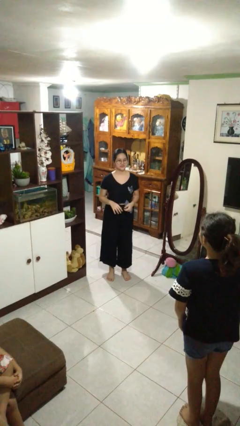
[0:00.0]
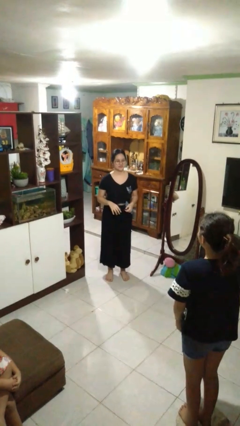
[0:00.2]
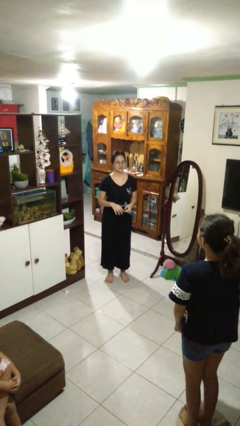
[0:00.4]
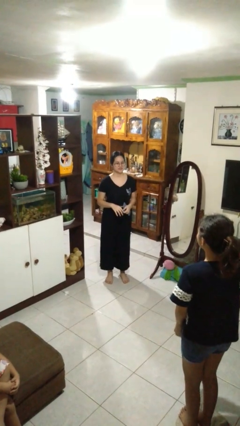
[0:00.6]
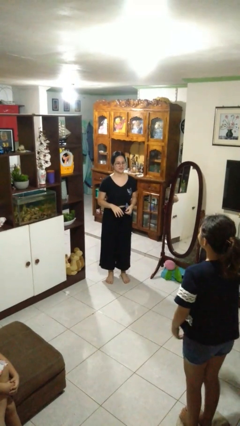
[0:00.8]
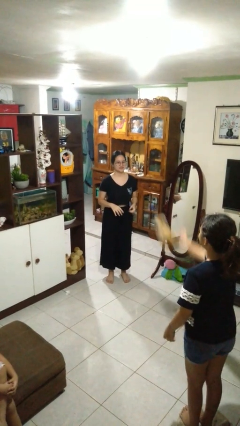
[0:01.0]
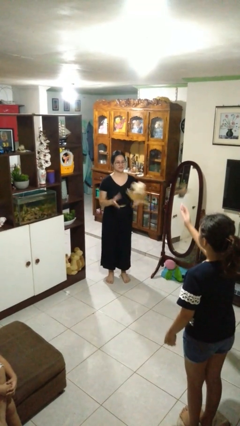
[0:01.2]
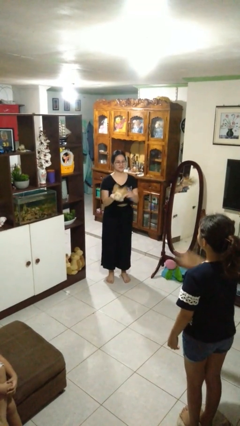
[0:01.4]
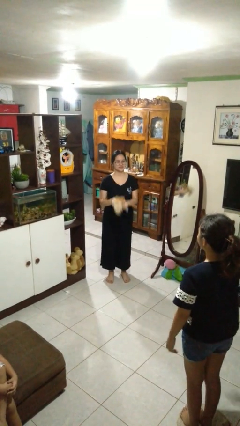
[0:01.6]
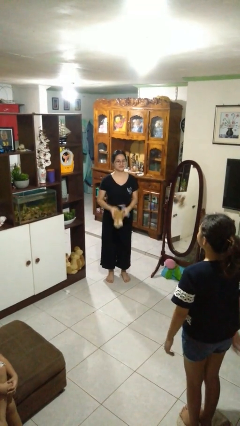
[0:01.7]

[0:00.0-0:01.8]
person catches object from person

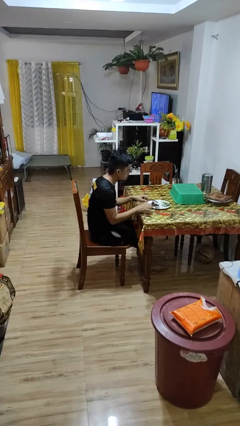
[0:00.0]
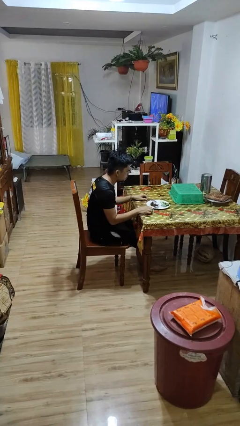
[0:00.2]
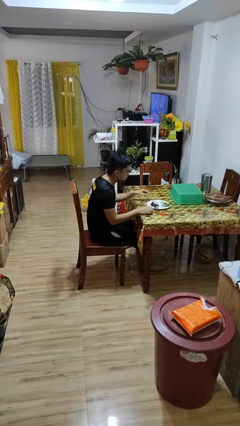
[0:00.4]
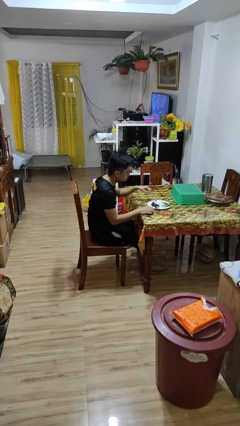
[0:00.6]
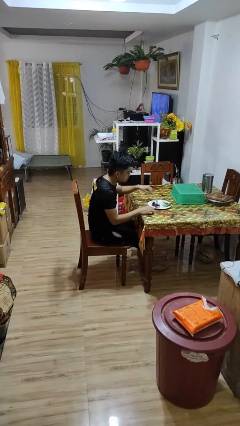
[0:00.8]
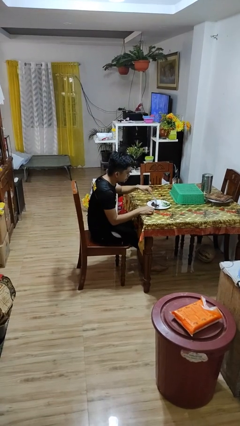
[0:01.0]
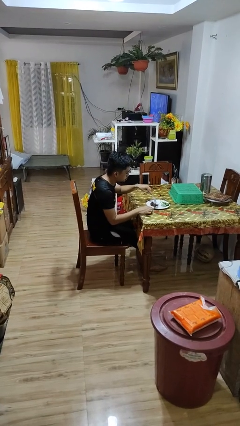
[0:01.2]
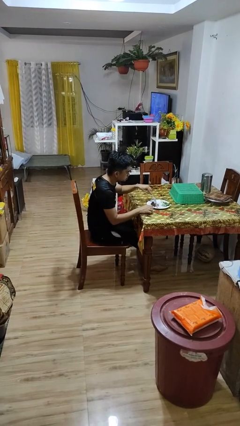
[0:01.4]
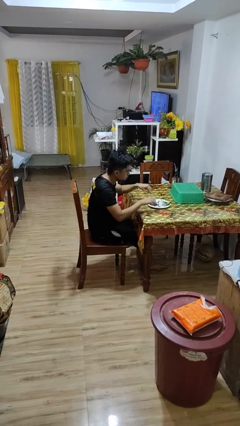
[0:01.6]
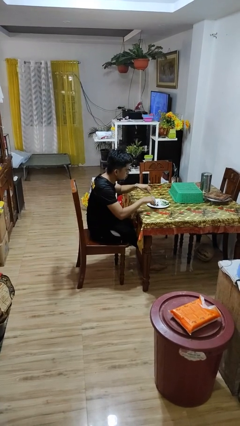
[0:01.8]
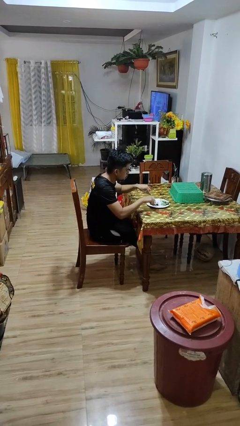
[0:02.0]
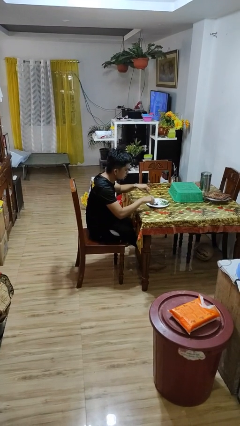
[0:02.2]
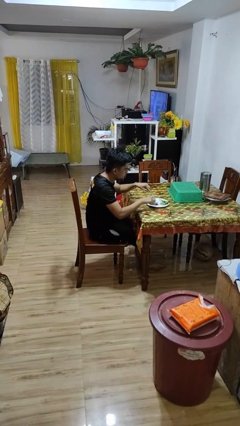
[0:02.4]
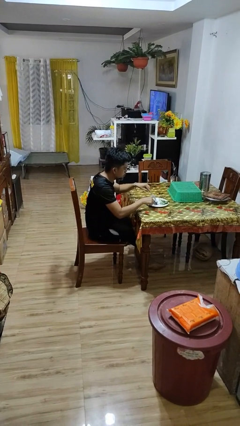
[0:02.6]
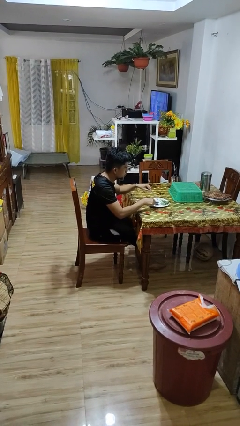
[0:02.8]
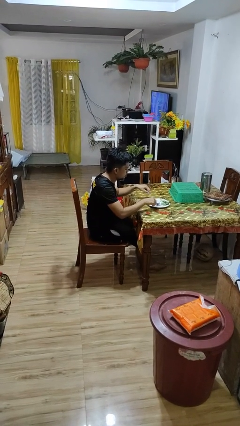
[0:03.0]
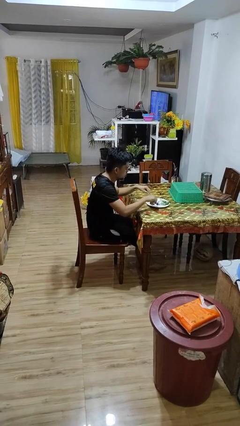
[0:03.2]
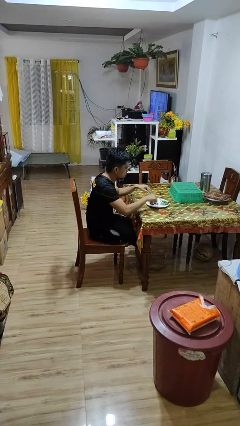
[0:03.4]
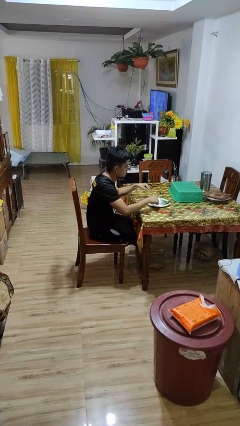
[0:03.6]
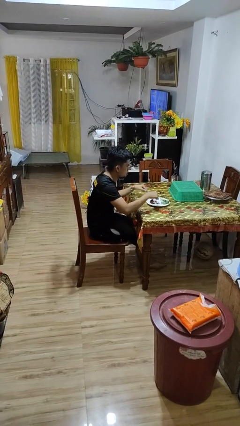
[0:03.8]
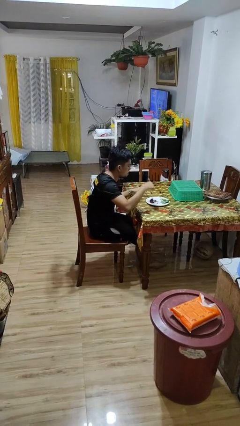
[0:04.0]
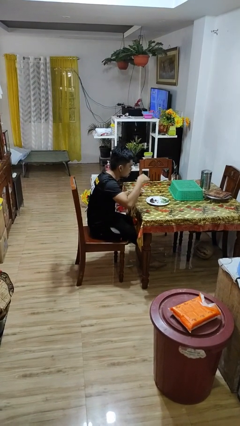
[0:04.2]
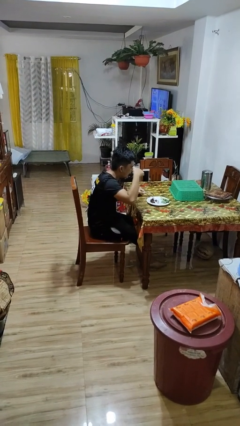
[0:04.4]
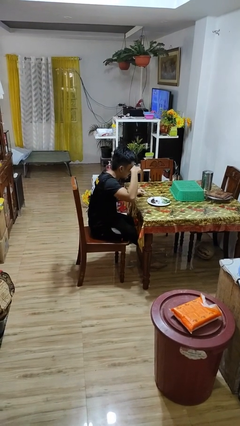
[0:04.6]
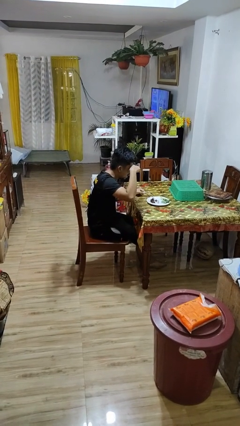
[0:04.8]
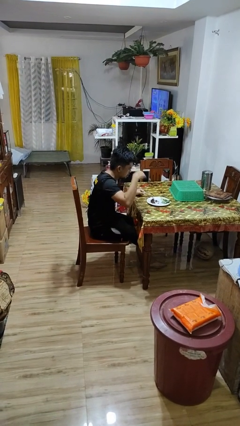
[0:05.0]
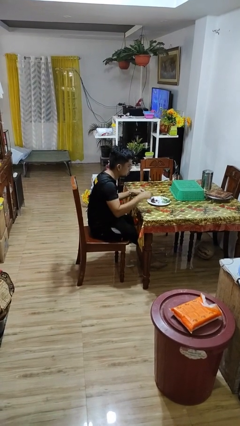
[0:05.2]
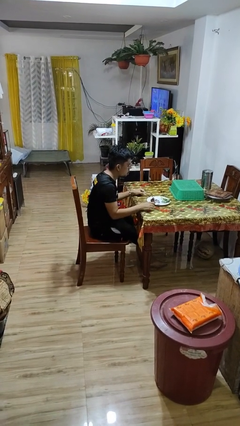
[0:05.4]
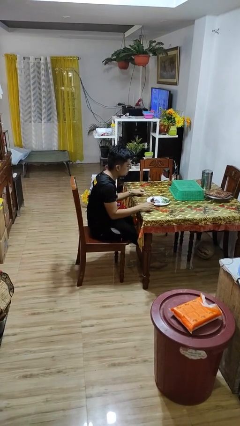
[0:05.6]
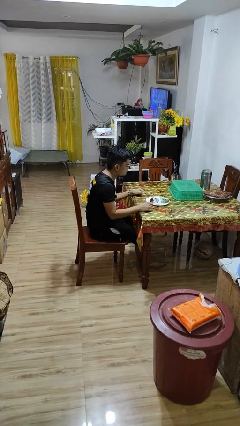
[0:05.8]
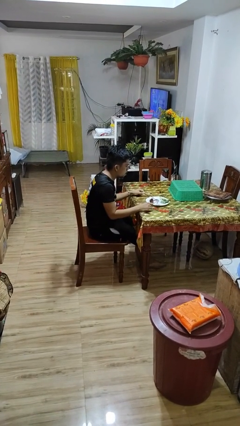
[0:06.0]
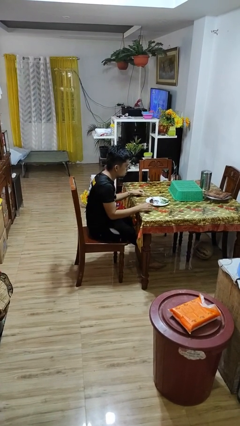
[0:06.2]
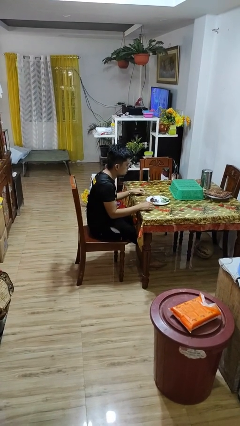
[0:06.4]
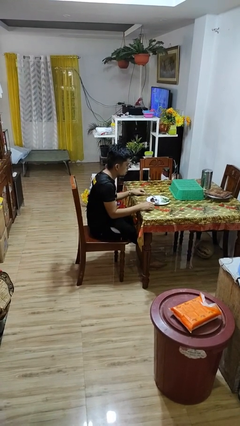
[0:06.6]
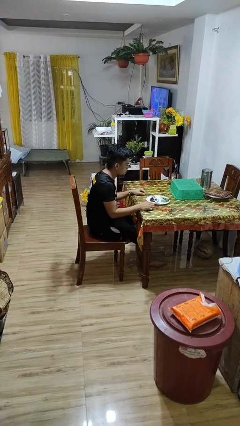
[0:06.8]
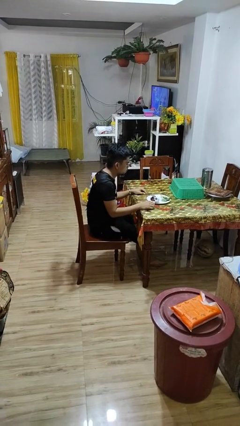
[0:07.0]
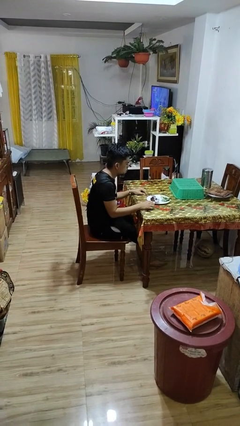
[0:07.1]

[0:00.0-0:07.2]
person eats with utensil

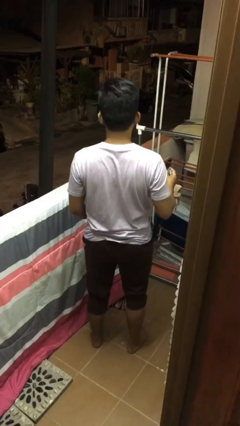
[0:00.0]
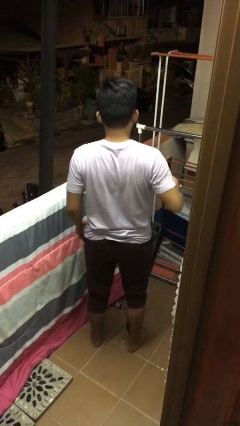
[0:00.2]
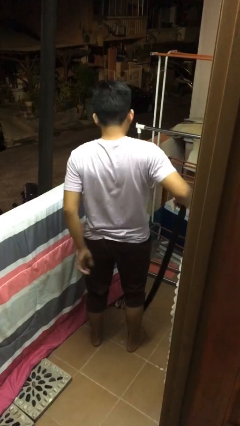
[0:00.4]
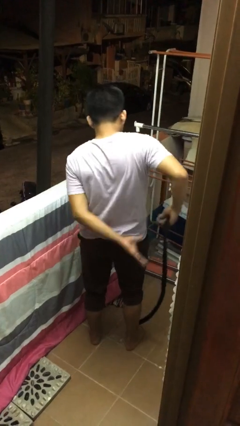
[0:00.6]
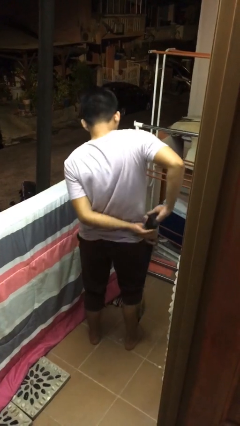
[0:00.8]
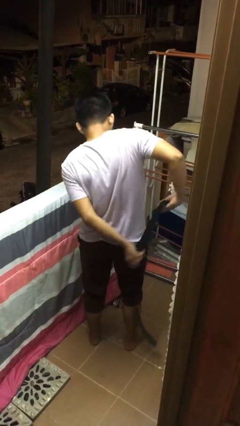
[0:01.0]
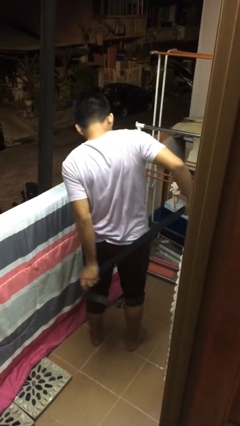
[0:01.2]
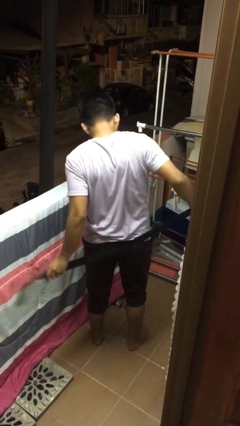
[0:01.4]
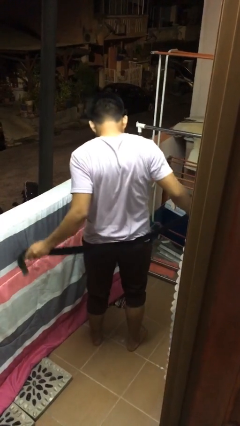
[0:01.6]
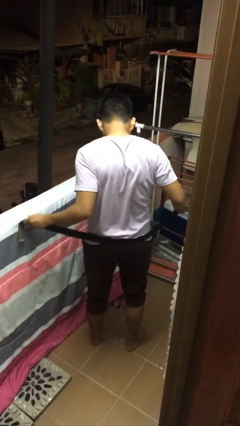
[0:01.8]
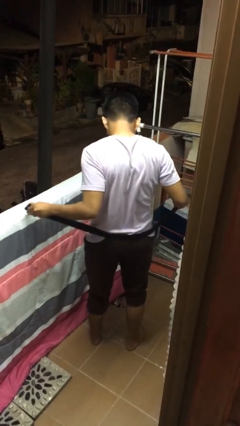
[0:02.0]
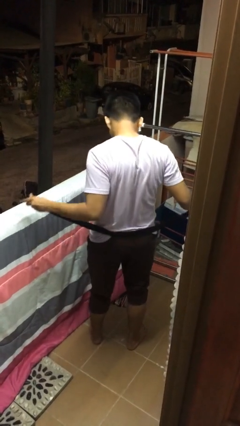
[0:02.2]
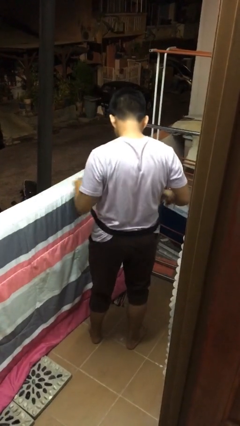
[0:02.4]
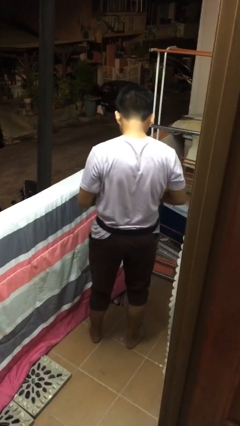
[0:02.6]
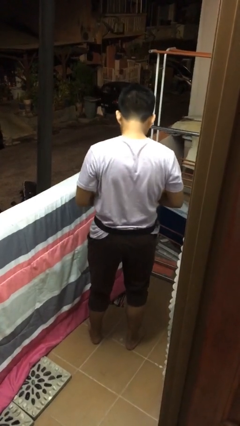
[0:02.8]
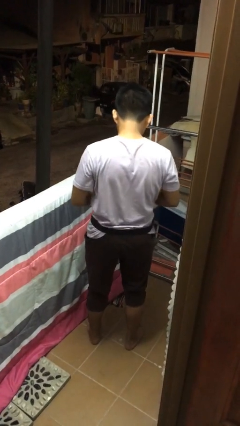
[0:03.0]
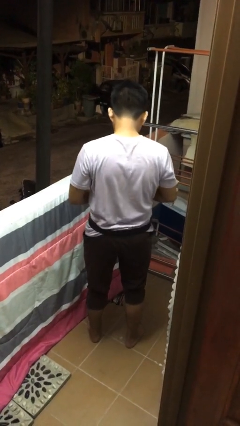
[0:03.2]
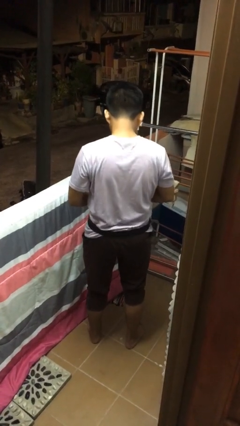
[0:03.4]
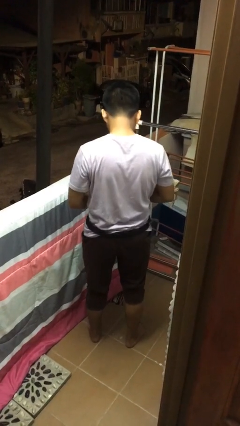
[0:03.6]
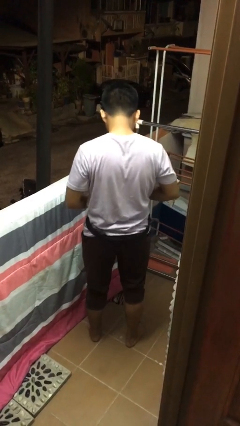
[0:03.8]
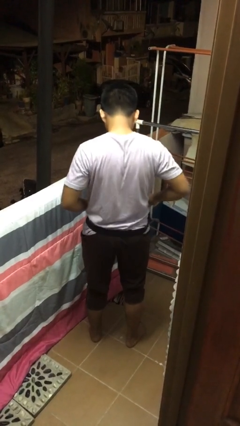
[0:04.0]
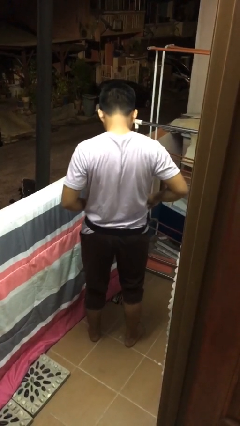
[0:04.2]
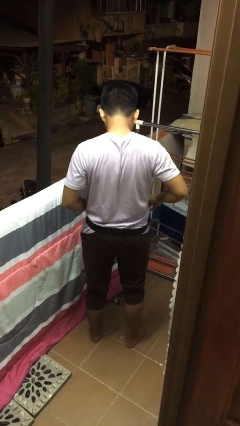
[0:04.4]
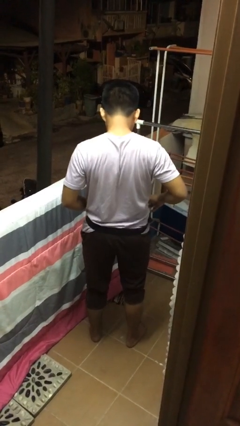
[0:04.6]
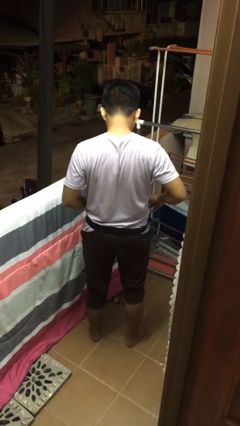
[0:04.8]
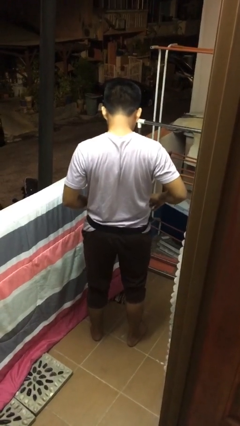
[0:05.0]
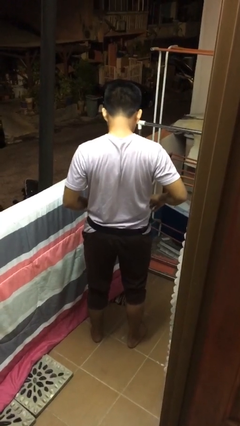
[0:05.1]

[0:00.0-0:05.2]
person puts on belt

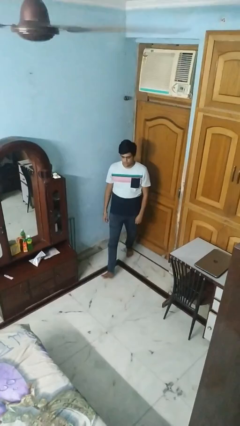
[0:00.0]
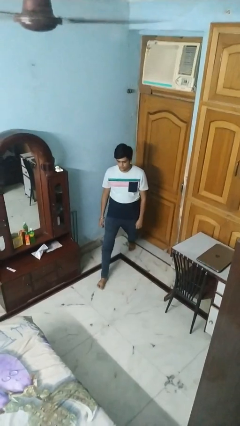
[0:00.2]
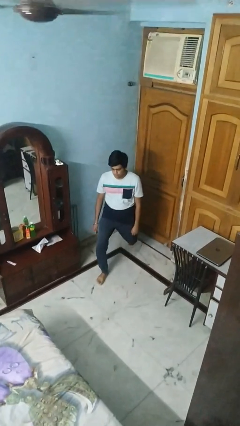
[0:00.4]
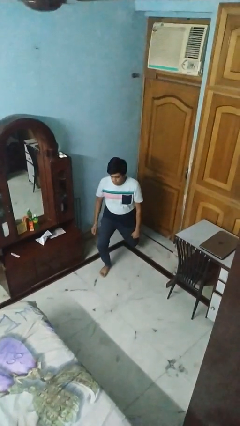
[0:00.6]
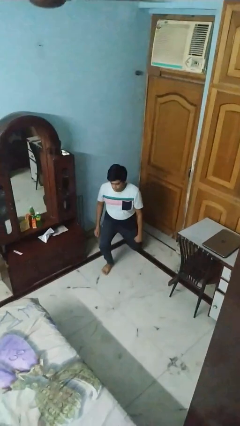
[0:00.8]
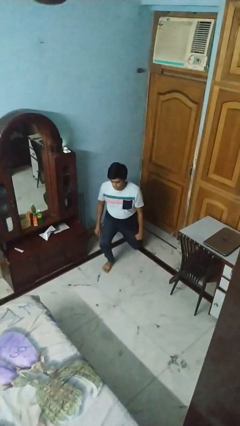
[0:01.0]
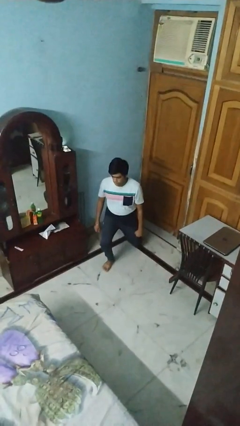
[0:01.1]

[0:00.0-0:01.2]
person exercises with lunges

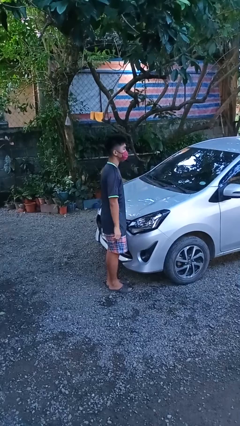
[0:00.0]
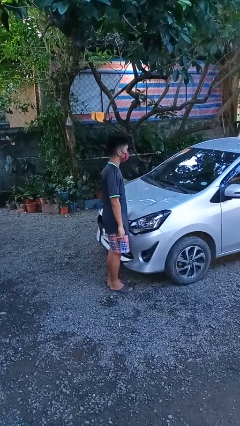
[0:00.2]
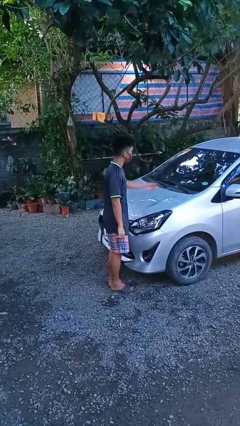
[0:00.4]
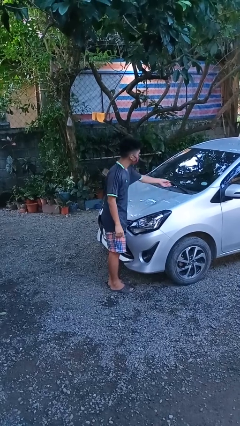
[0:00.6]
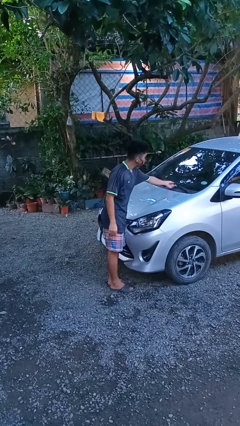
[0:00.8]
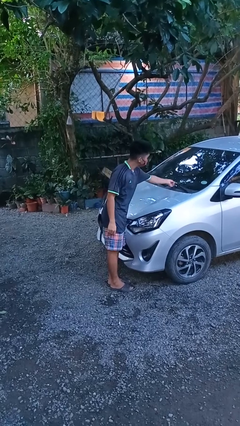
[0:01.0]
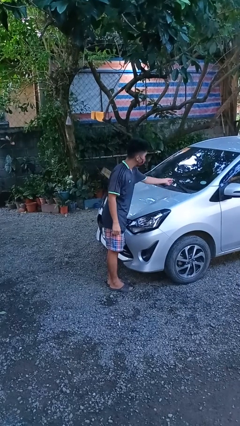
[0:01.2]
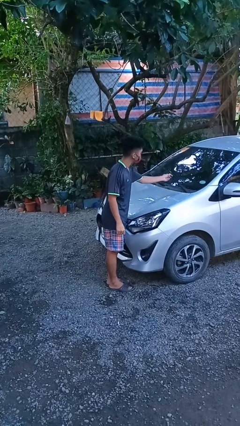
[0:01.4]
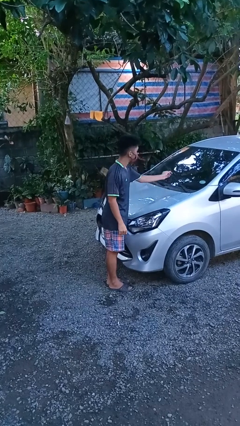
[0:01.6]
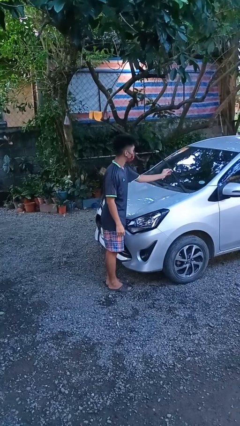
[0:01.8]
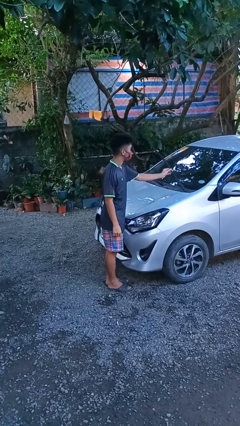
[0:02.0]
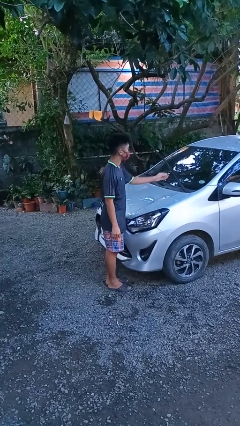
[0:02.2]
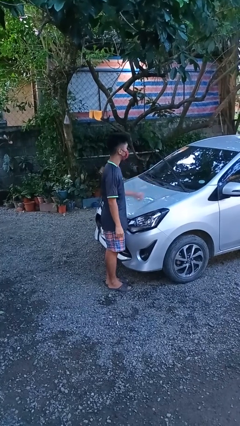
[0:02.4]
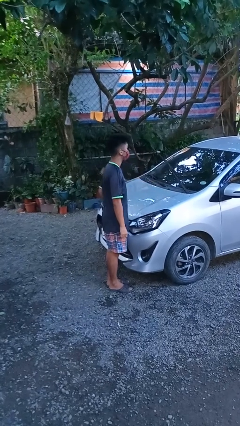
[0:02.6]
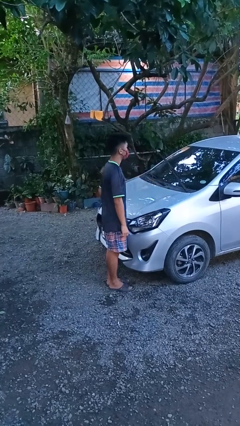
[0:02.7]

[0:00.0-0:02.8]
person flips up car wipers
